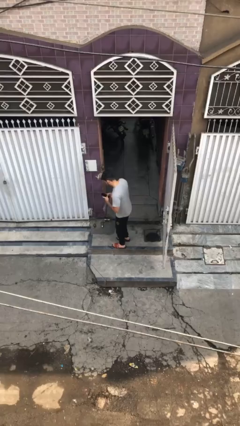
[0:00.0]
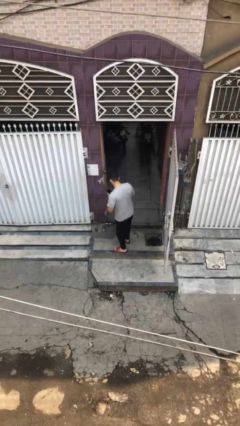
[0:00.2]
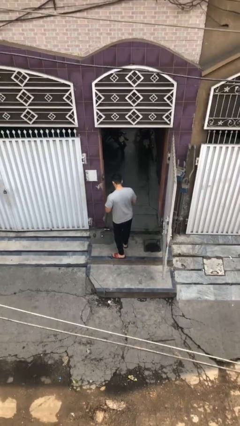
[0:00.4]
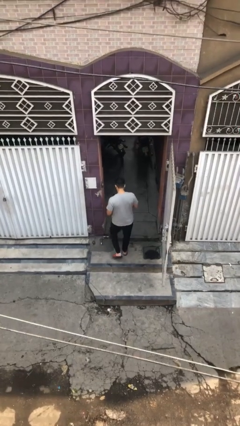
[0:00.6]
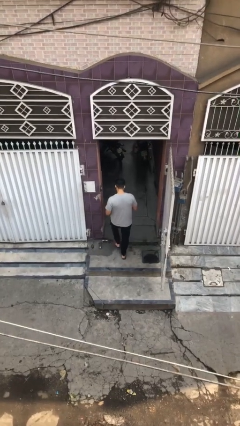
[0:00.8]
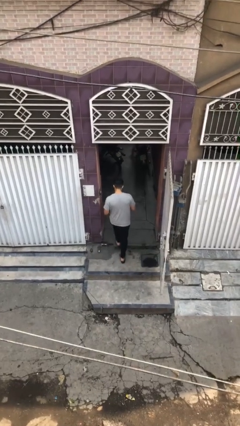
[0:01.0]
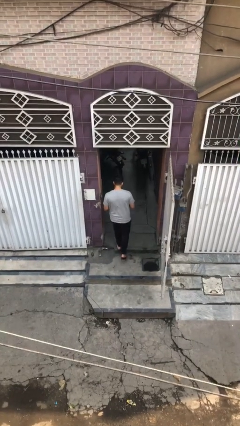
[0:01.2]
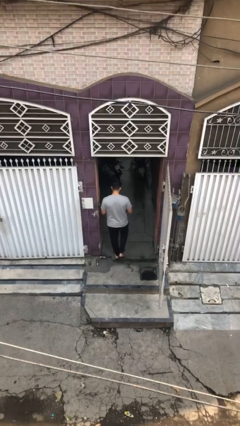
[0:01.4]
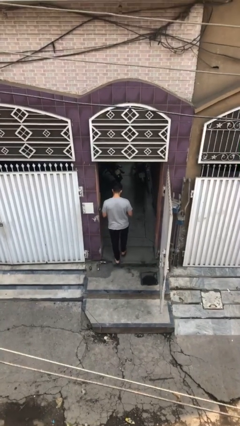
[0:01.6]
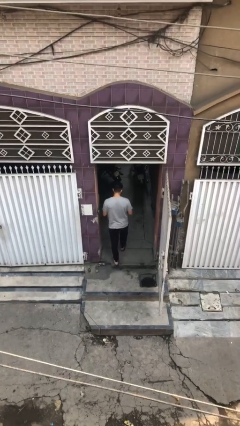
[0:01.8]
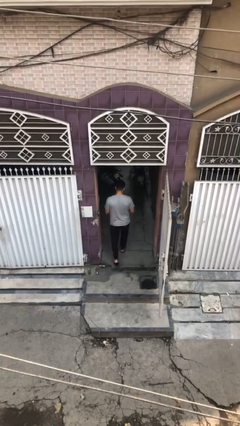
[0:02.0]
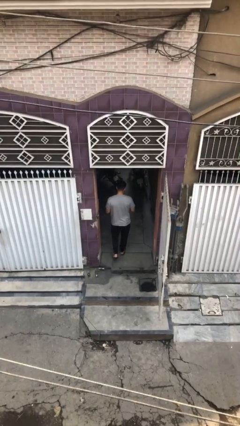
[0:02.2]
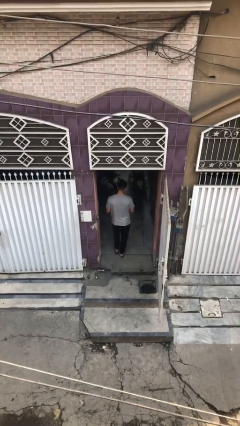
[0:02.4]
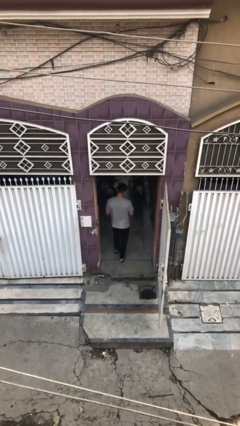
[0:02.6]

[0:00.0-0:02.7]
person exits scene through structure

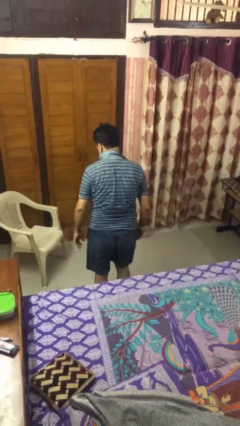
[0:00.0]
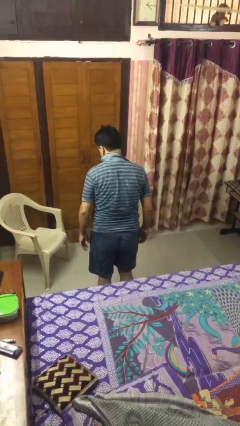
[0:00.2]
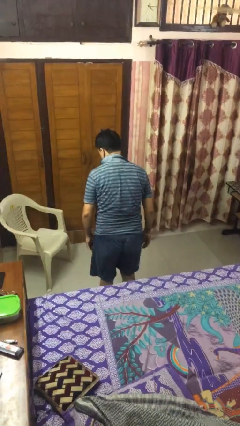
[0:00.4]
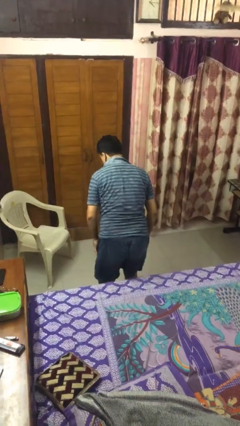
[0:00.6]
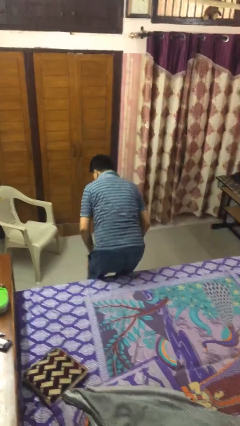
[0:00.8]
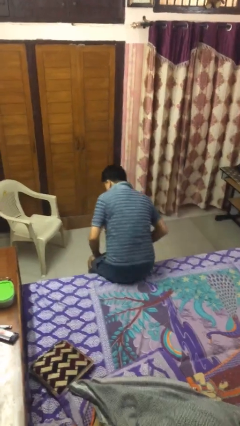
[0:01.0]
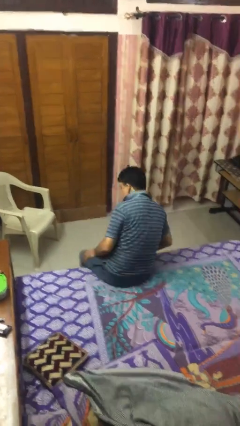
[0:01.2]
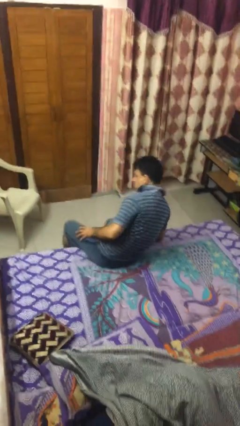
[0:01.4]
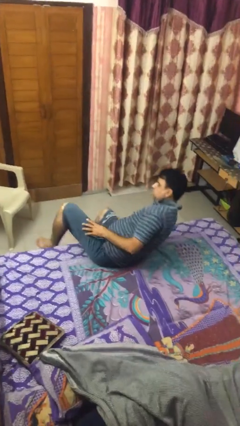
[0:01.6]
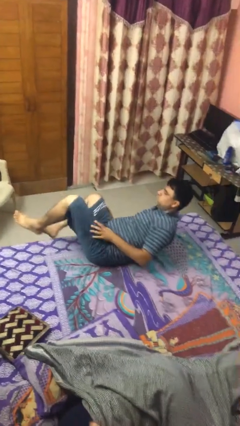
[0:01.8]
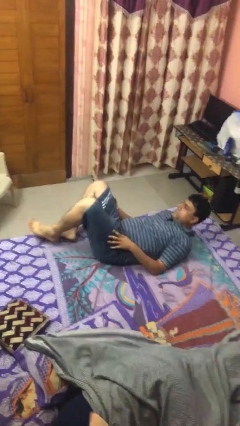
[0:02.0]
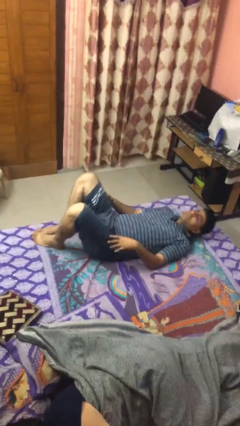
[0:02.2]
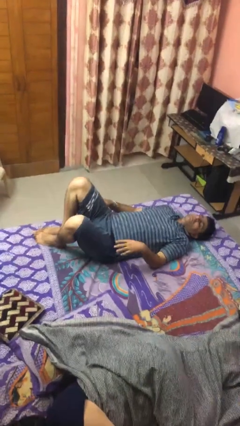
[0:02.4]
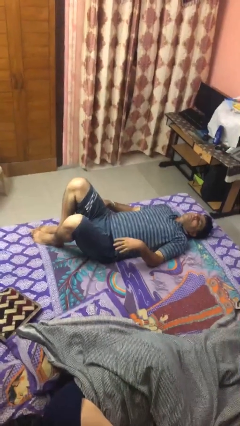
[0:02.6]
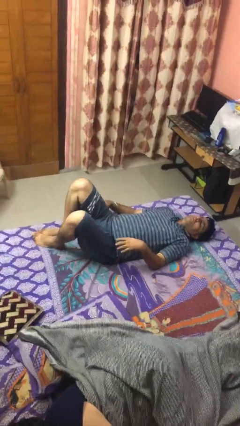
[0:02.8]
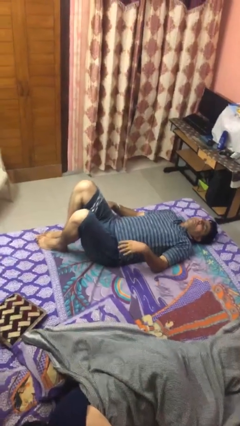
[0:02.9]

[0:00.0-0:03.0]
person lies down on bed

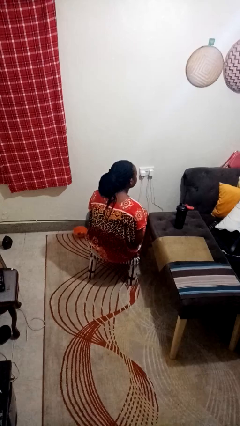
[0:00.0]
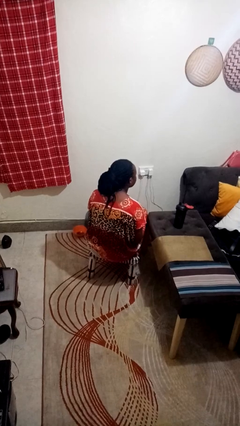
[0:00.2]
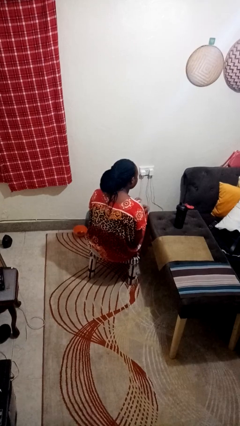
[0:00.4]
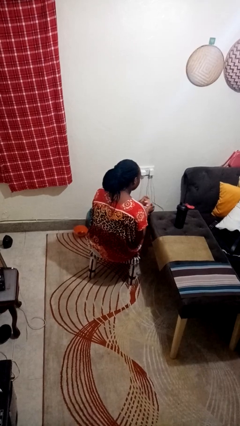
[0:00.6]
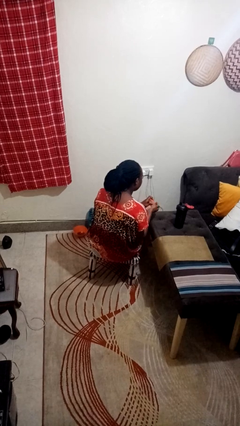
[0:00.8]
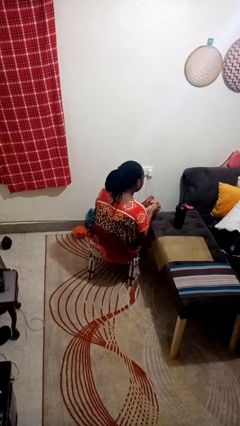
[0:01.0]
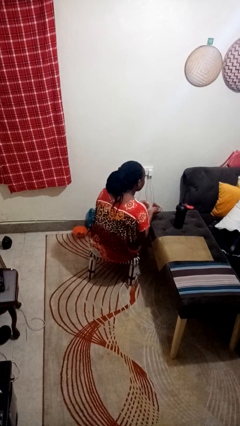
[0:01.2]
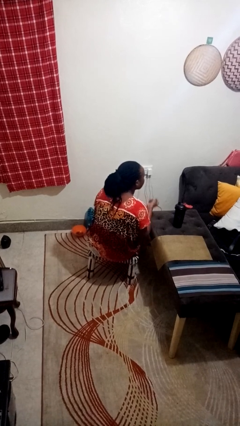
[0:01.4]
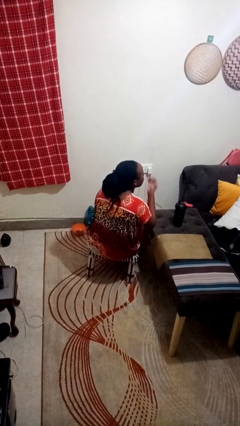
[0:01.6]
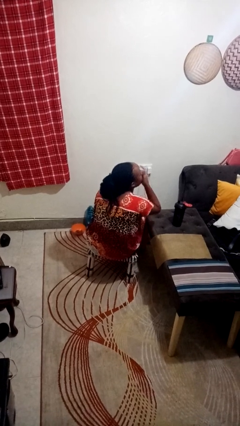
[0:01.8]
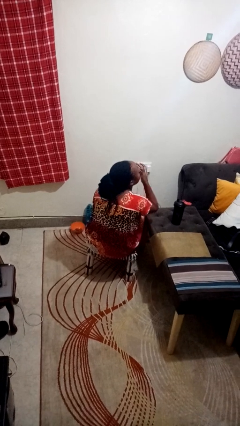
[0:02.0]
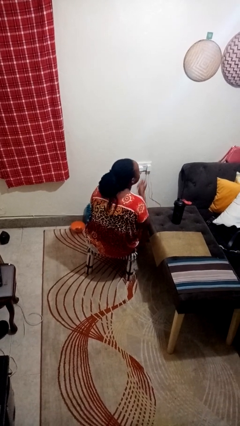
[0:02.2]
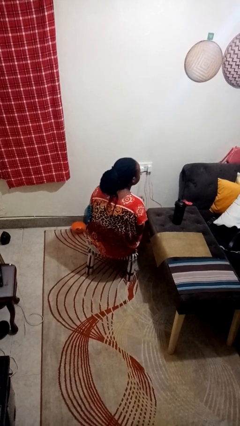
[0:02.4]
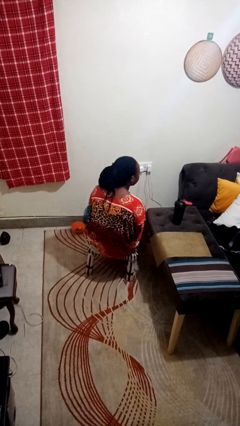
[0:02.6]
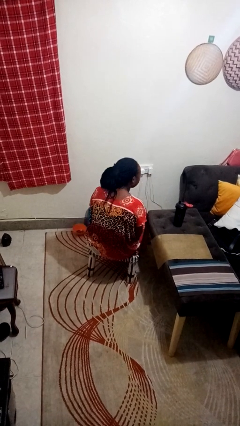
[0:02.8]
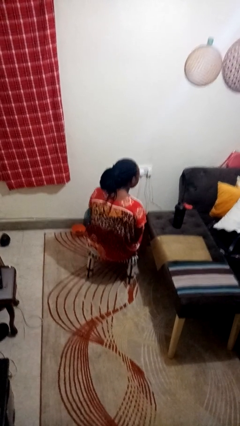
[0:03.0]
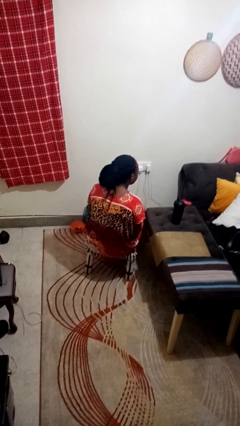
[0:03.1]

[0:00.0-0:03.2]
person takes medicine pills

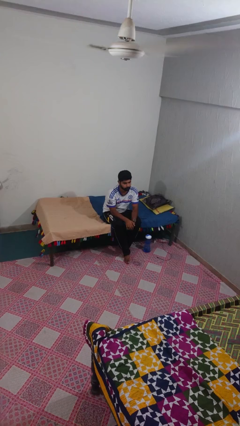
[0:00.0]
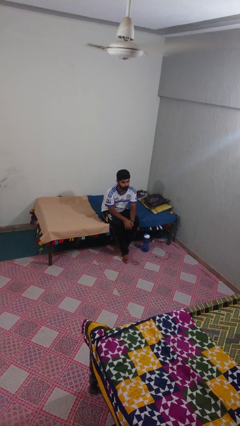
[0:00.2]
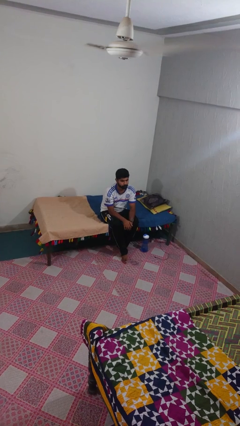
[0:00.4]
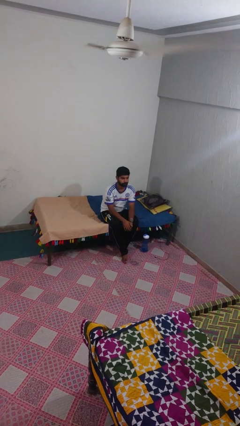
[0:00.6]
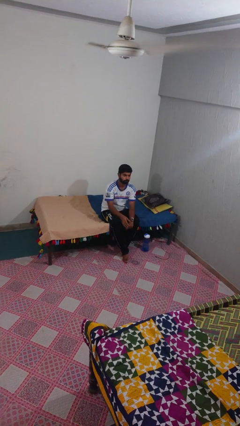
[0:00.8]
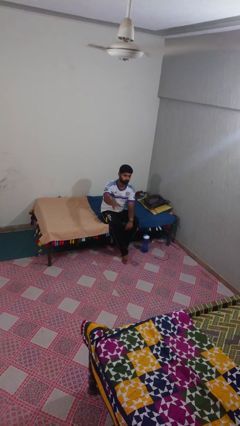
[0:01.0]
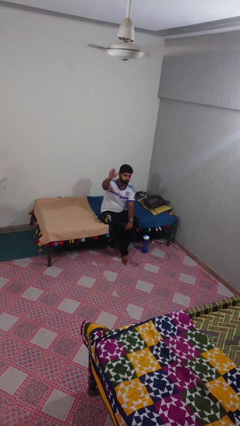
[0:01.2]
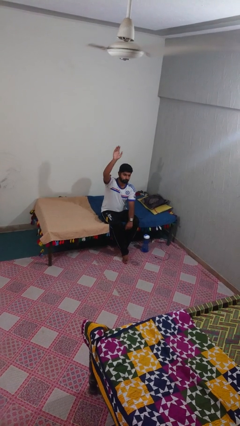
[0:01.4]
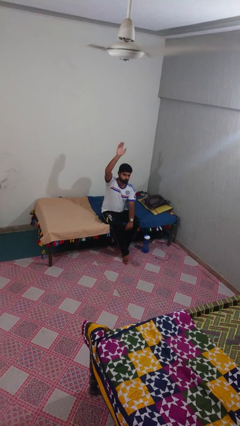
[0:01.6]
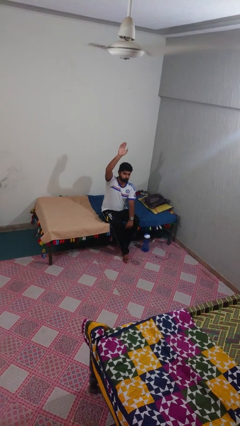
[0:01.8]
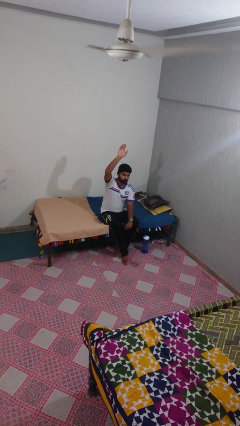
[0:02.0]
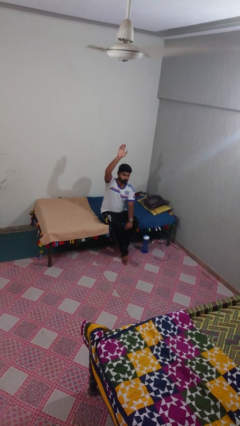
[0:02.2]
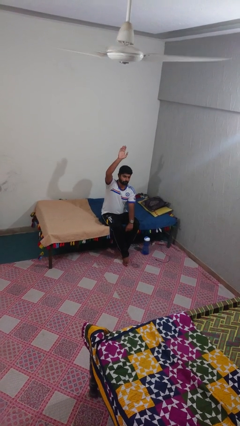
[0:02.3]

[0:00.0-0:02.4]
person gestures raise hand

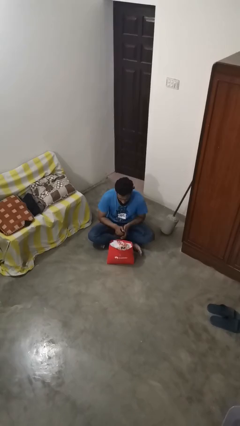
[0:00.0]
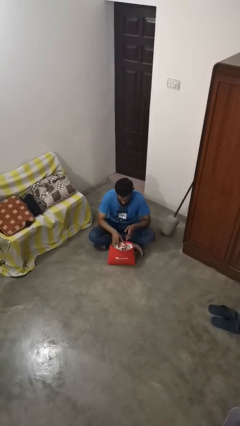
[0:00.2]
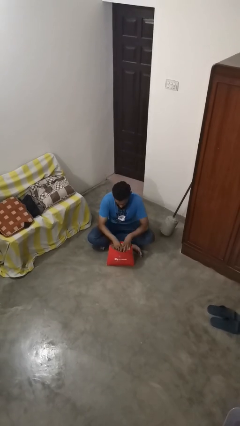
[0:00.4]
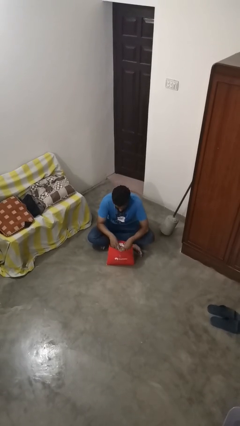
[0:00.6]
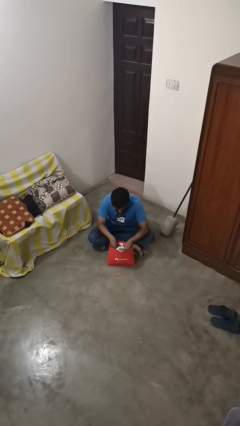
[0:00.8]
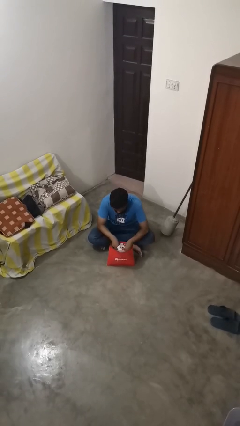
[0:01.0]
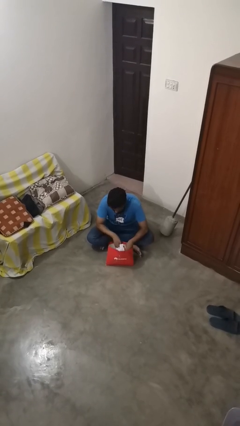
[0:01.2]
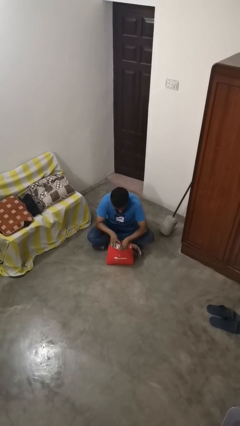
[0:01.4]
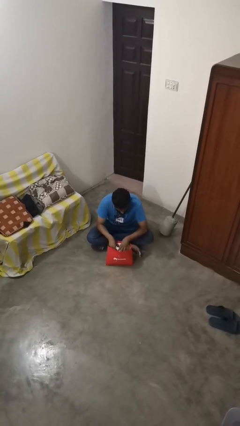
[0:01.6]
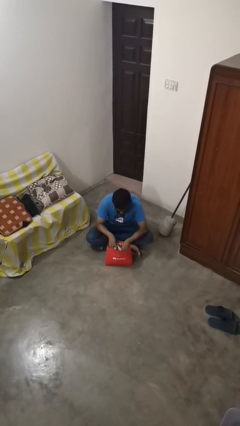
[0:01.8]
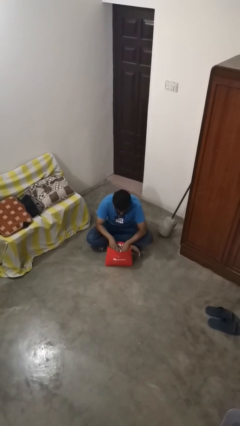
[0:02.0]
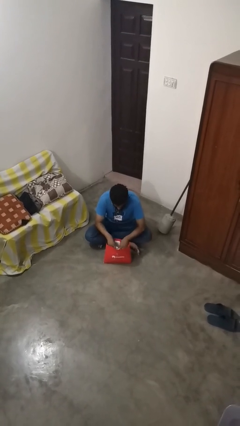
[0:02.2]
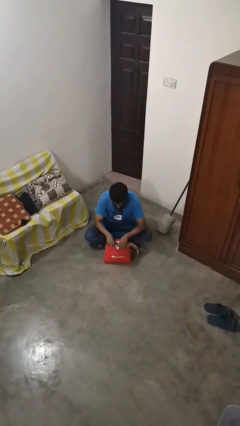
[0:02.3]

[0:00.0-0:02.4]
person searches in bag

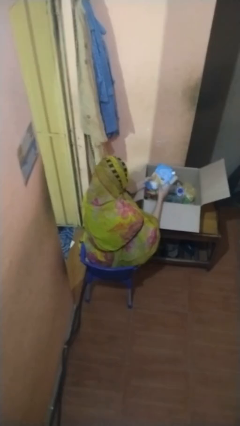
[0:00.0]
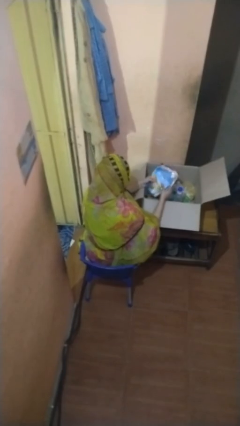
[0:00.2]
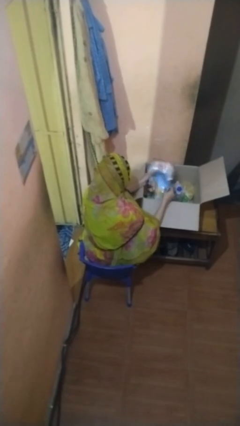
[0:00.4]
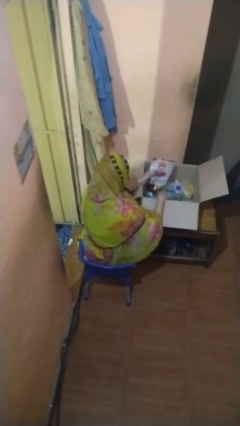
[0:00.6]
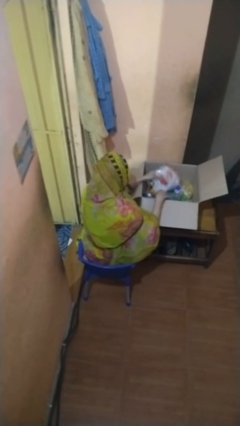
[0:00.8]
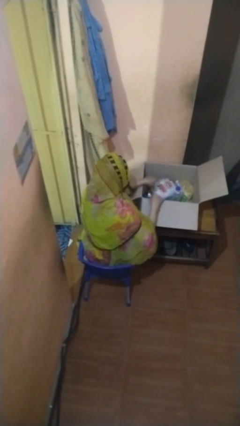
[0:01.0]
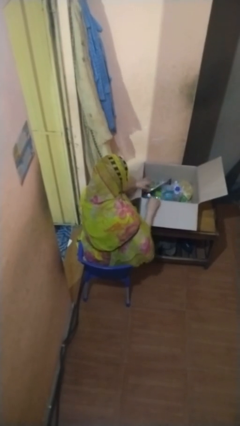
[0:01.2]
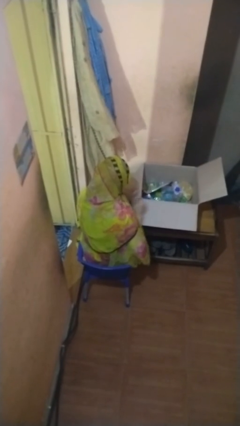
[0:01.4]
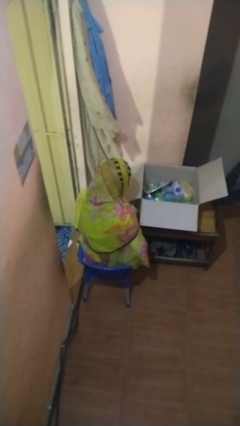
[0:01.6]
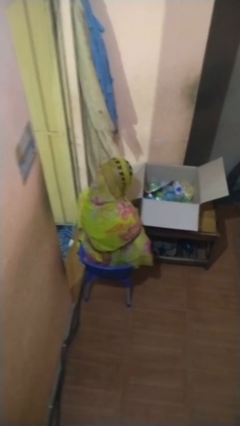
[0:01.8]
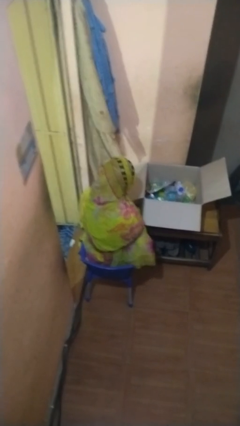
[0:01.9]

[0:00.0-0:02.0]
person puts object into box

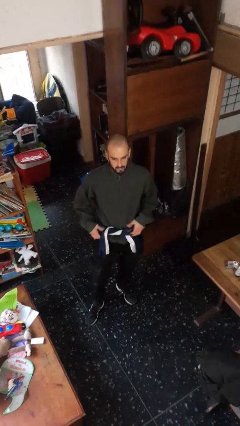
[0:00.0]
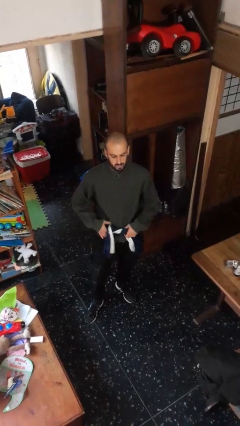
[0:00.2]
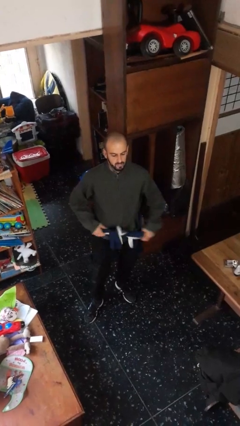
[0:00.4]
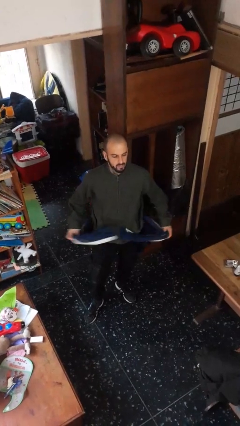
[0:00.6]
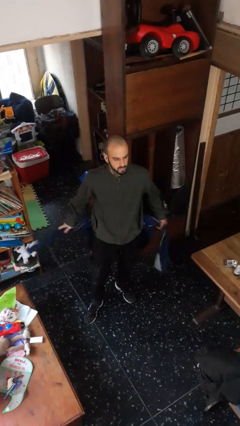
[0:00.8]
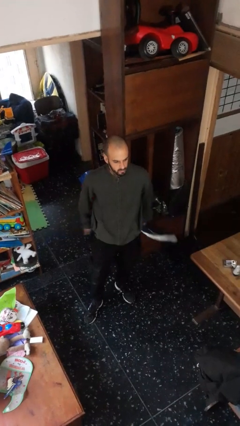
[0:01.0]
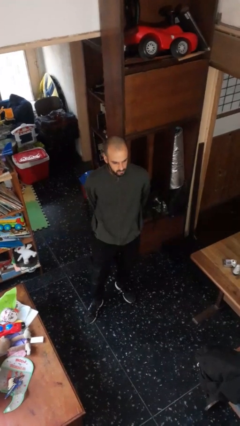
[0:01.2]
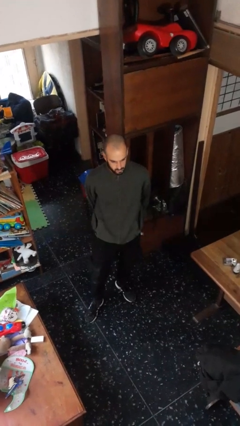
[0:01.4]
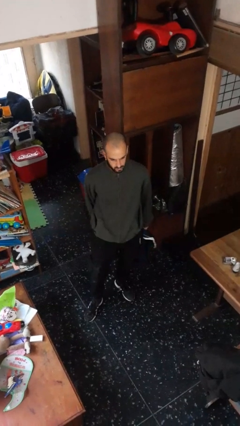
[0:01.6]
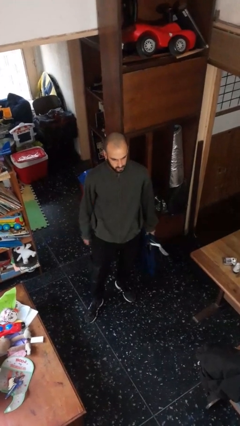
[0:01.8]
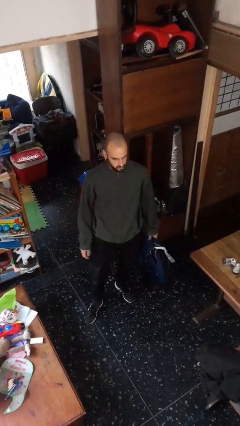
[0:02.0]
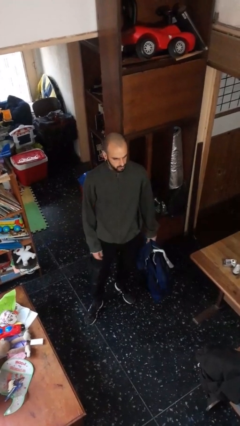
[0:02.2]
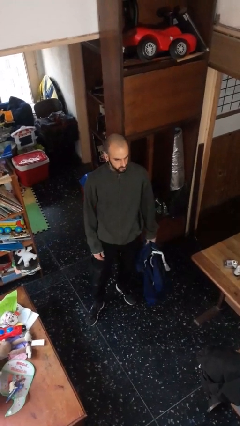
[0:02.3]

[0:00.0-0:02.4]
person unties jacket around waist
